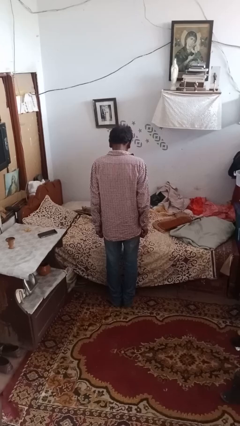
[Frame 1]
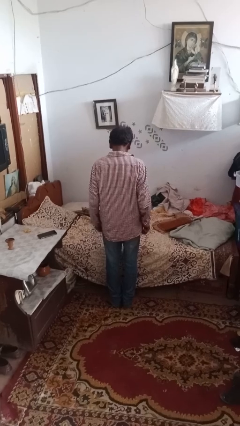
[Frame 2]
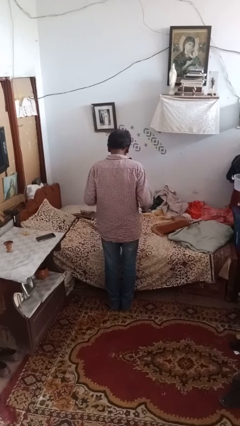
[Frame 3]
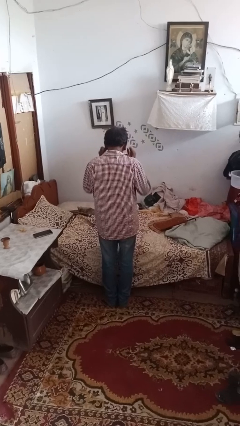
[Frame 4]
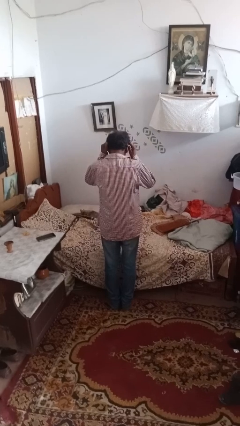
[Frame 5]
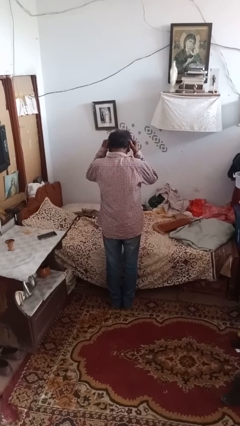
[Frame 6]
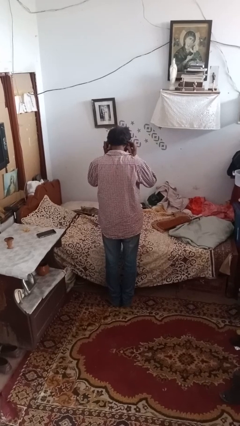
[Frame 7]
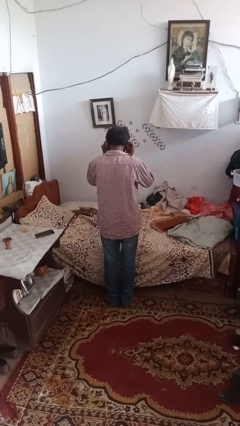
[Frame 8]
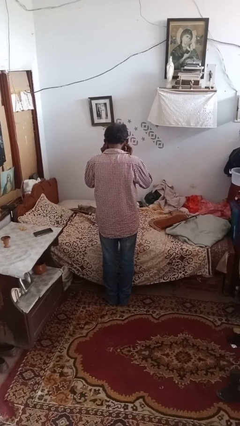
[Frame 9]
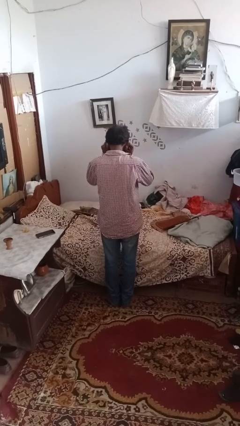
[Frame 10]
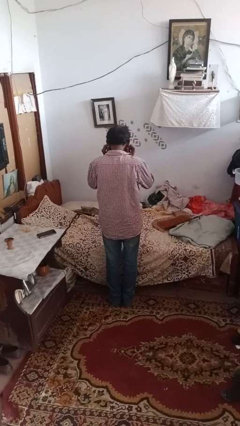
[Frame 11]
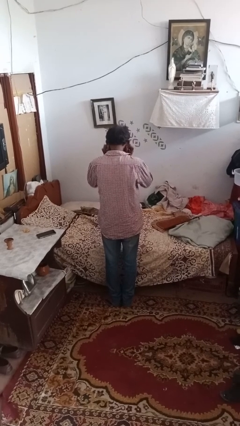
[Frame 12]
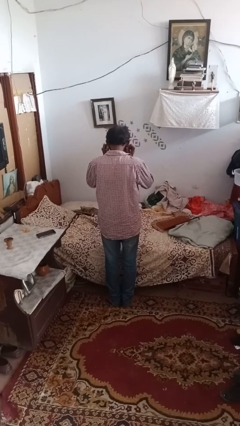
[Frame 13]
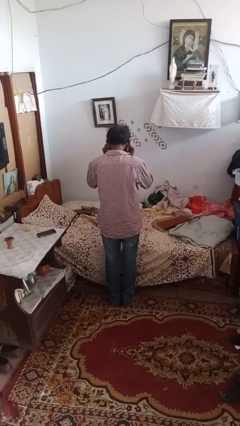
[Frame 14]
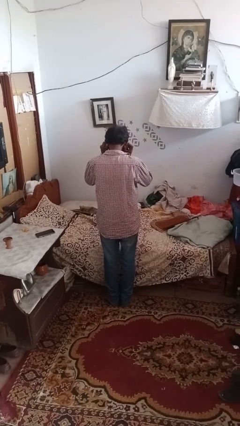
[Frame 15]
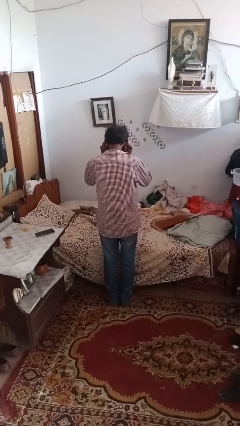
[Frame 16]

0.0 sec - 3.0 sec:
person touches earlobe

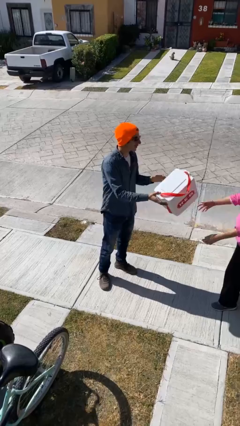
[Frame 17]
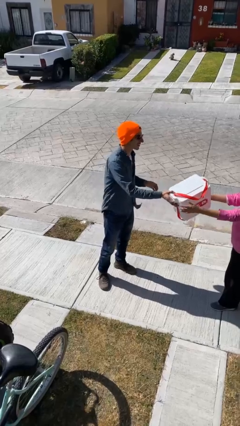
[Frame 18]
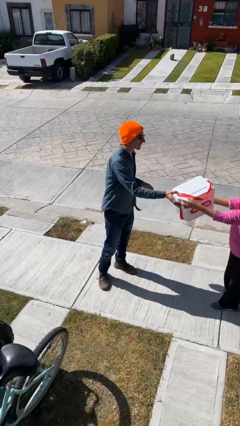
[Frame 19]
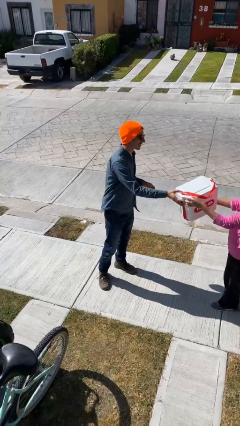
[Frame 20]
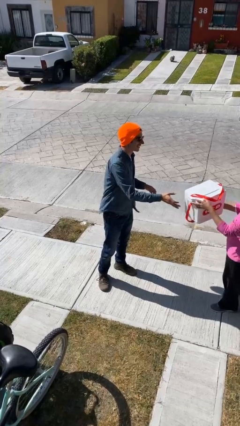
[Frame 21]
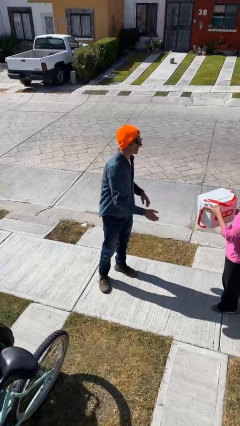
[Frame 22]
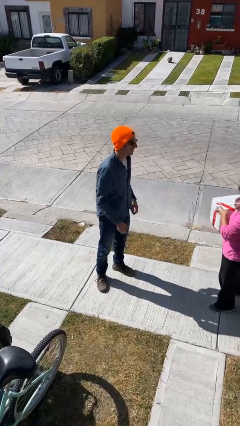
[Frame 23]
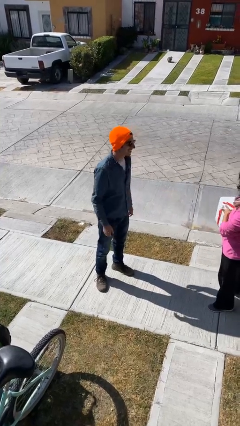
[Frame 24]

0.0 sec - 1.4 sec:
person transfers object to person

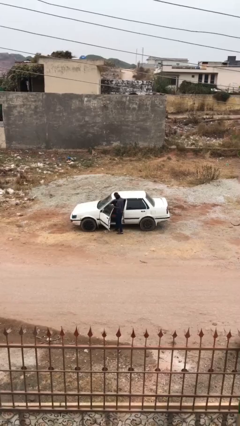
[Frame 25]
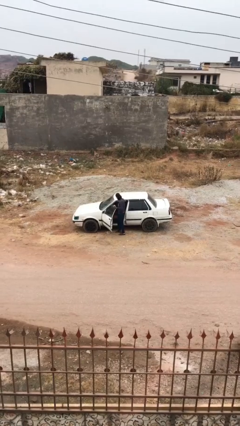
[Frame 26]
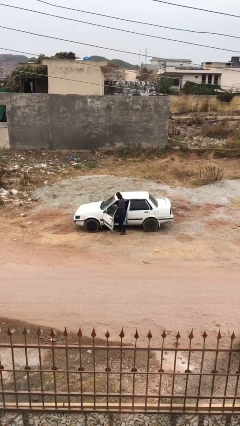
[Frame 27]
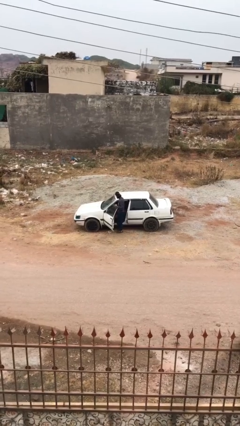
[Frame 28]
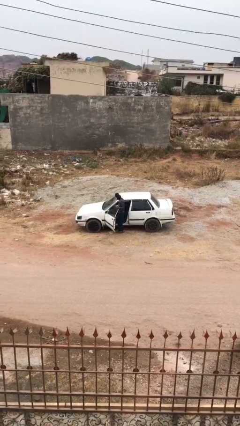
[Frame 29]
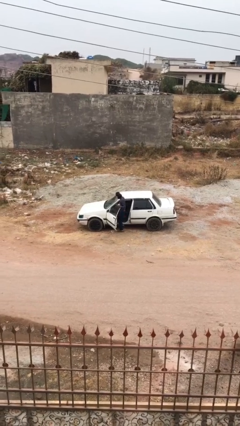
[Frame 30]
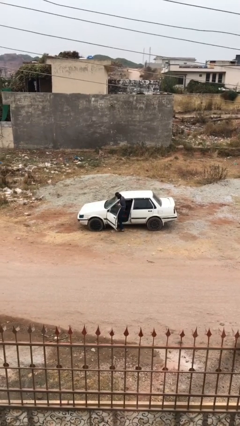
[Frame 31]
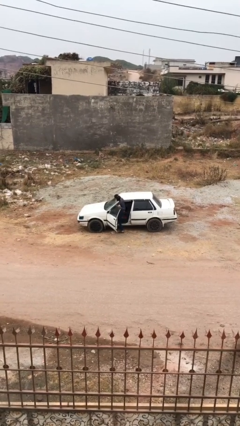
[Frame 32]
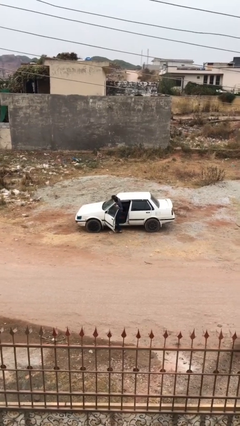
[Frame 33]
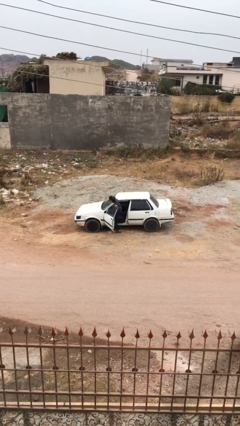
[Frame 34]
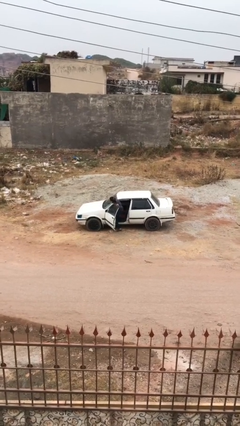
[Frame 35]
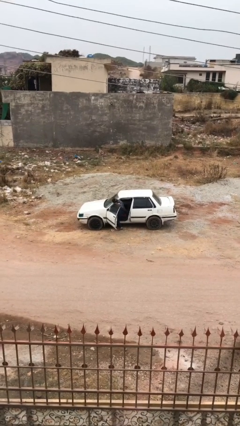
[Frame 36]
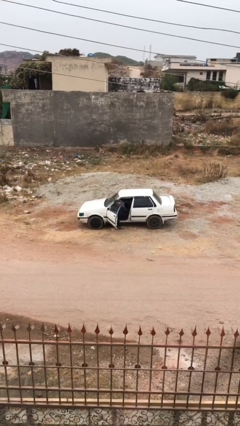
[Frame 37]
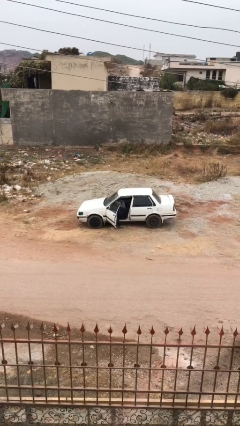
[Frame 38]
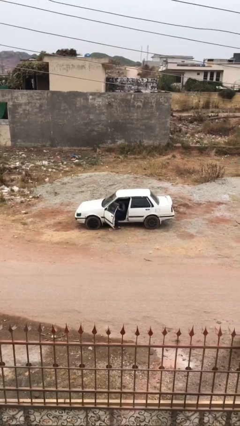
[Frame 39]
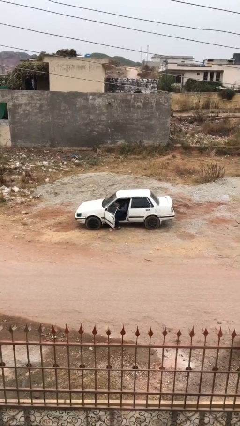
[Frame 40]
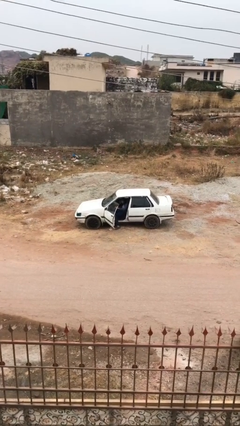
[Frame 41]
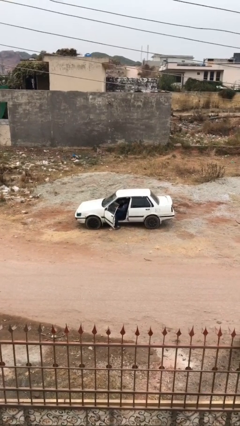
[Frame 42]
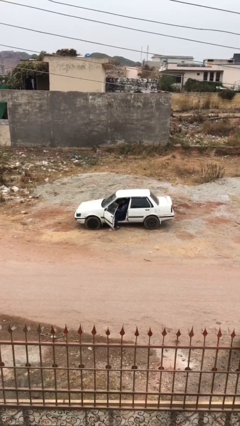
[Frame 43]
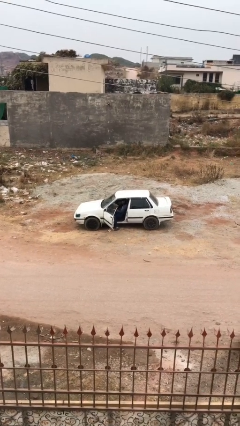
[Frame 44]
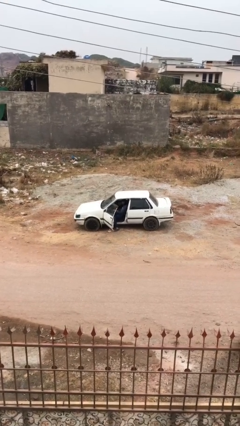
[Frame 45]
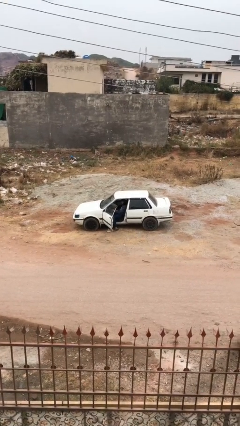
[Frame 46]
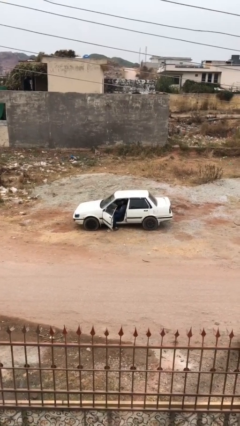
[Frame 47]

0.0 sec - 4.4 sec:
person enters car

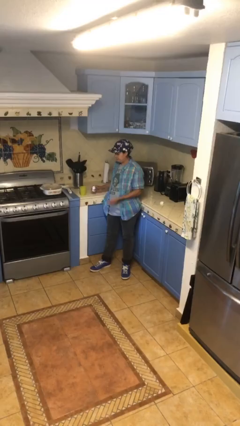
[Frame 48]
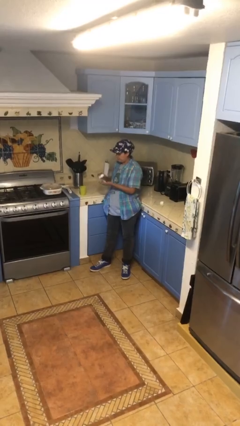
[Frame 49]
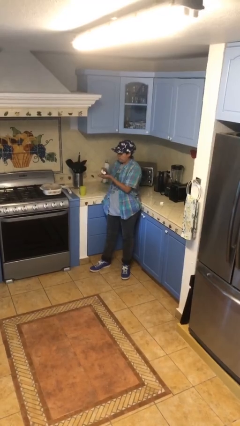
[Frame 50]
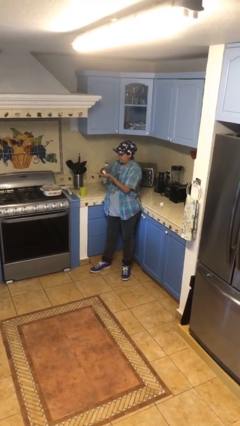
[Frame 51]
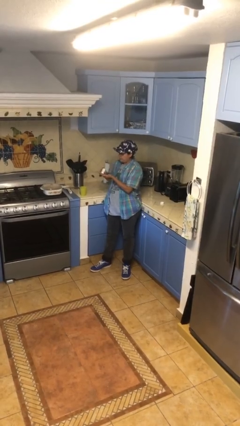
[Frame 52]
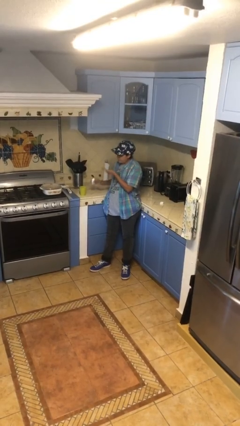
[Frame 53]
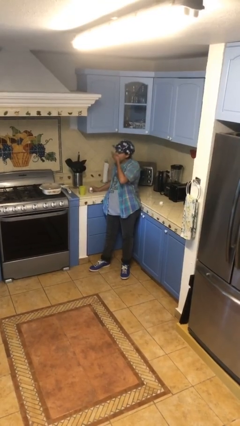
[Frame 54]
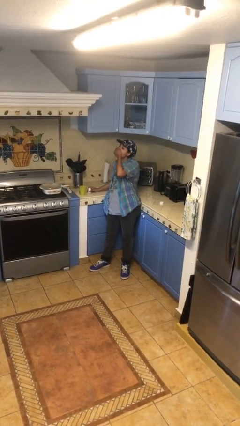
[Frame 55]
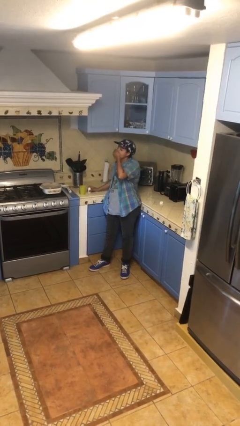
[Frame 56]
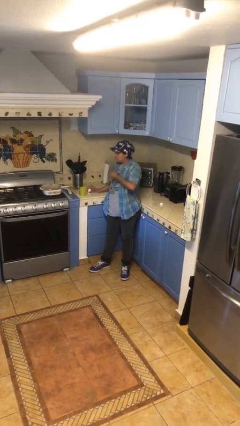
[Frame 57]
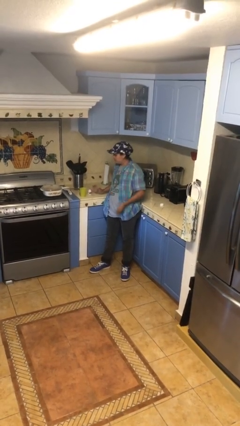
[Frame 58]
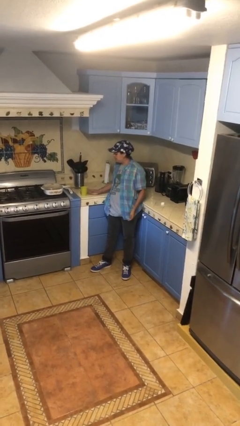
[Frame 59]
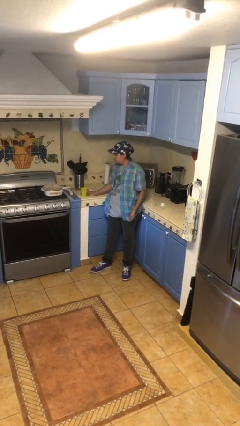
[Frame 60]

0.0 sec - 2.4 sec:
person takes medicine pills

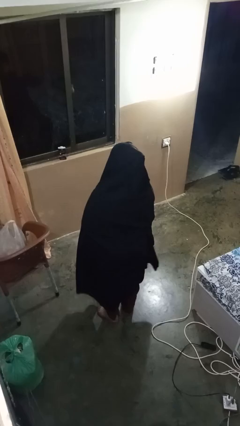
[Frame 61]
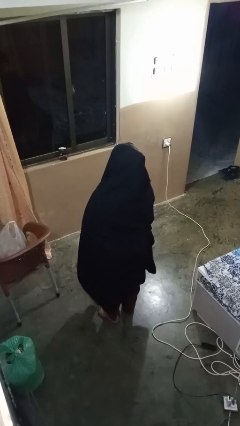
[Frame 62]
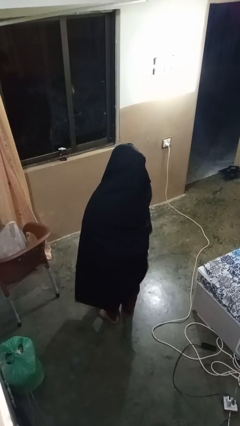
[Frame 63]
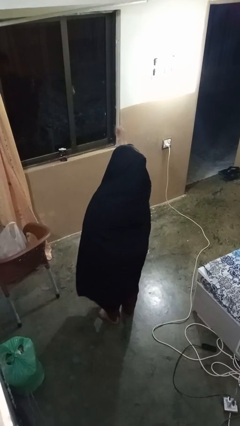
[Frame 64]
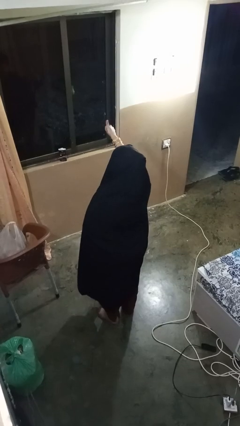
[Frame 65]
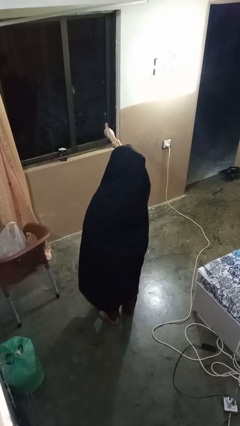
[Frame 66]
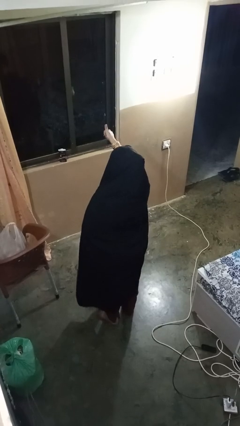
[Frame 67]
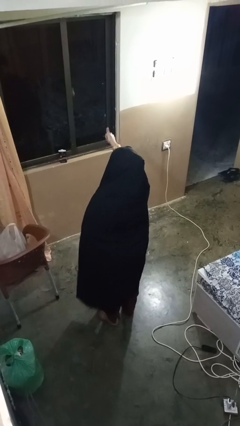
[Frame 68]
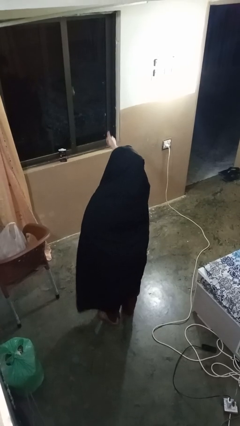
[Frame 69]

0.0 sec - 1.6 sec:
person gestures thumbs up

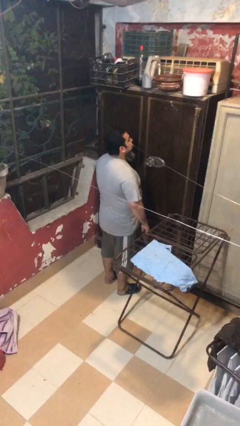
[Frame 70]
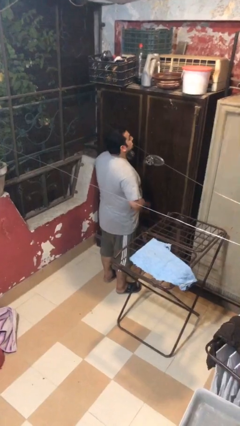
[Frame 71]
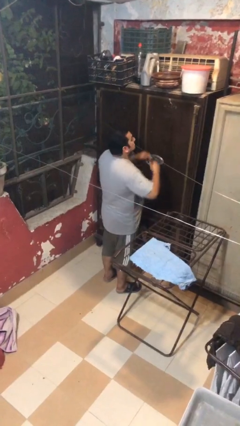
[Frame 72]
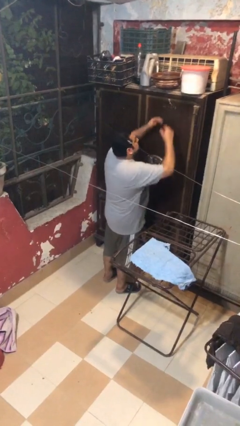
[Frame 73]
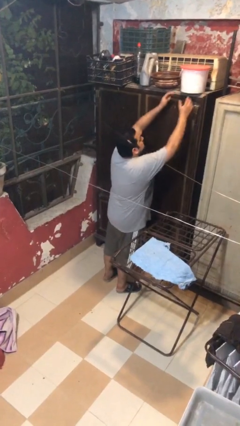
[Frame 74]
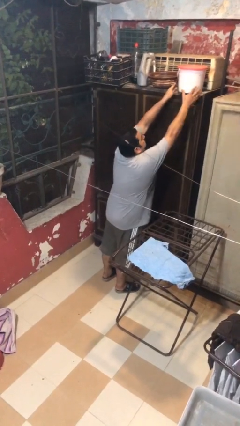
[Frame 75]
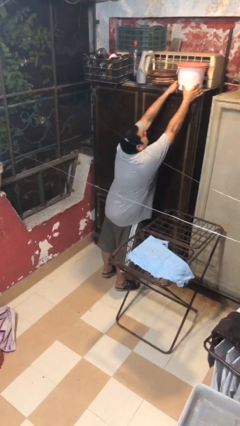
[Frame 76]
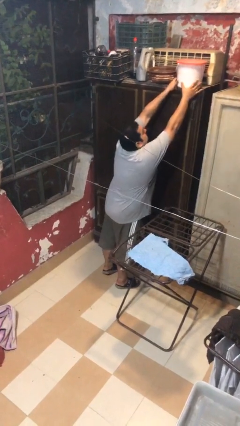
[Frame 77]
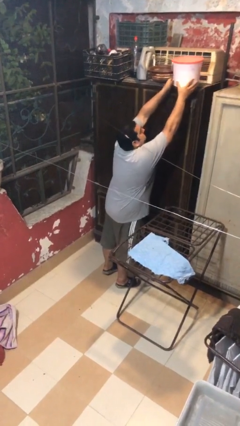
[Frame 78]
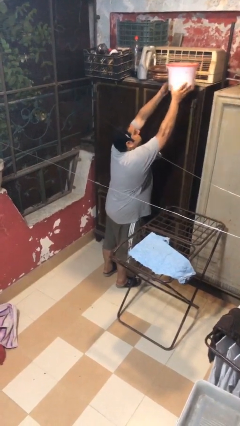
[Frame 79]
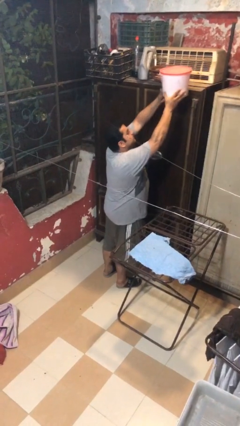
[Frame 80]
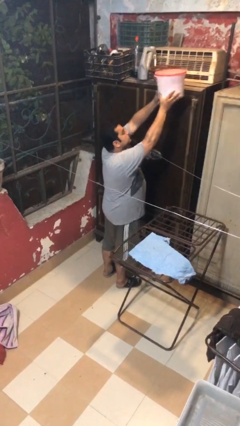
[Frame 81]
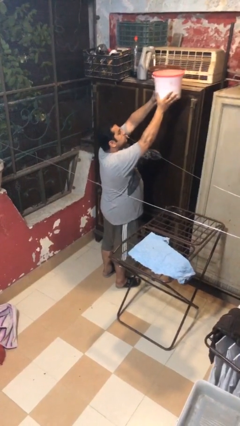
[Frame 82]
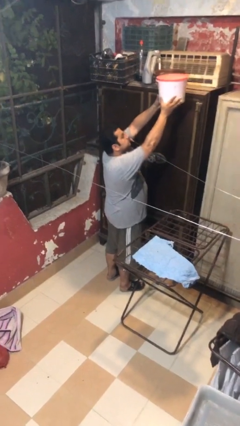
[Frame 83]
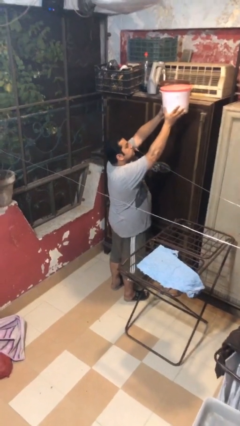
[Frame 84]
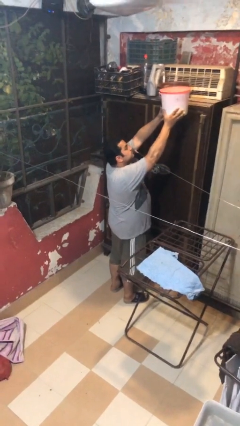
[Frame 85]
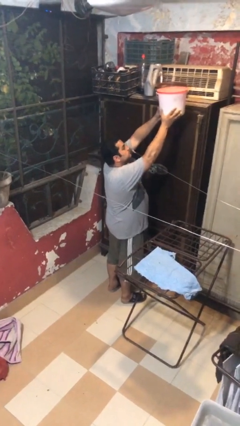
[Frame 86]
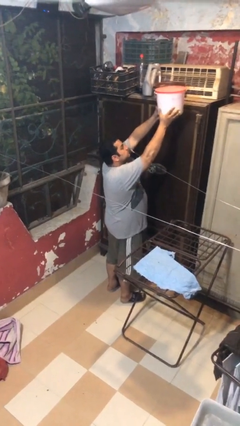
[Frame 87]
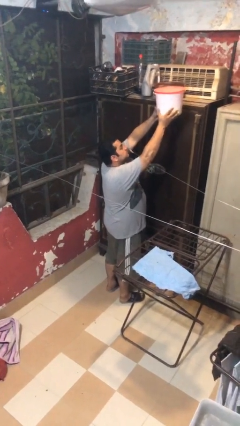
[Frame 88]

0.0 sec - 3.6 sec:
person picks up object from shelf

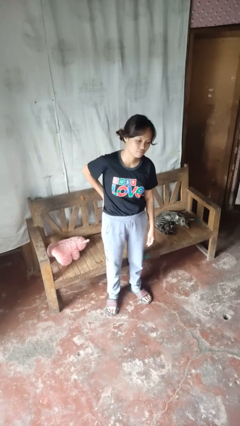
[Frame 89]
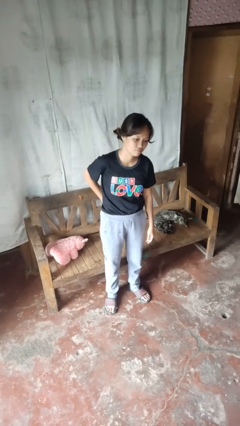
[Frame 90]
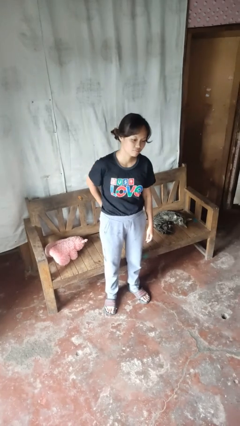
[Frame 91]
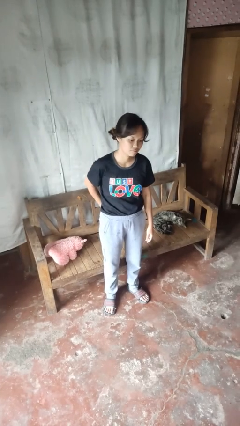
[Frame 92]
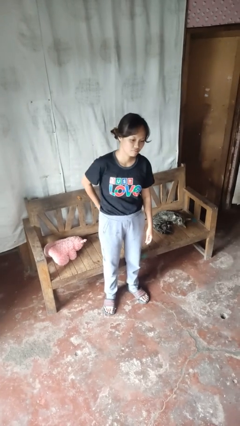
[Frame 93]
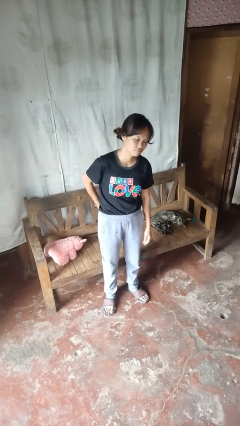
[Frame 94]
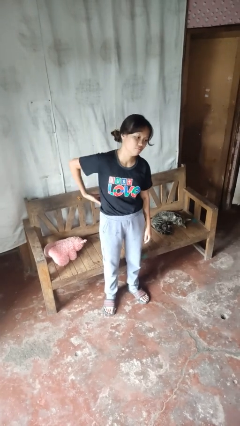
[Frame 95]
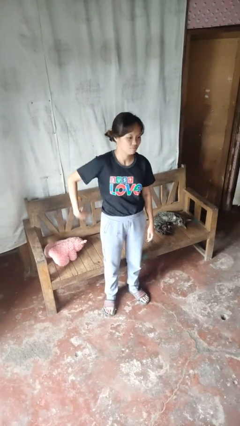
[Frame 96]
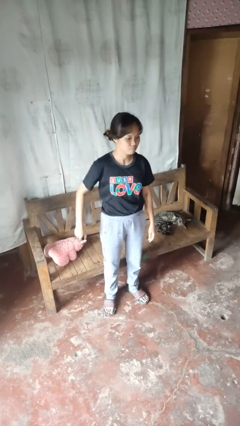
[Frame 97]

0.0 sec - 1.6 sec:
person puts hands in back pockets
